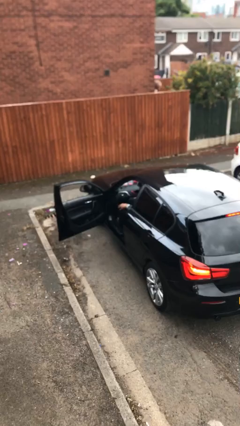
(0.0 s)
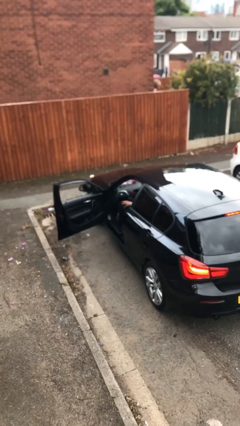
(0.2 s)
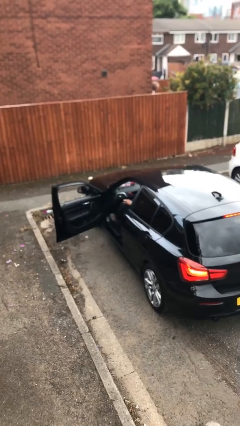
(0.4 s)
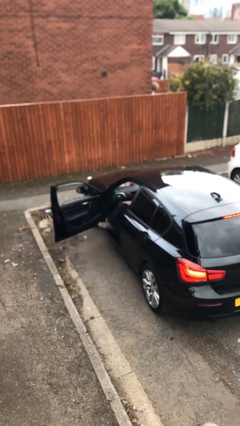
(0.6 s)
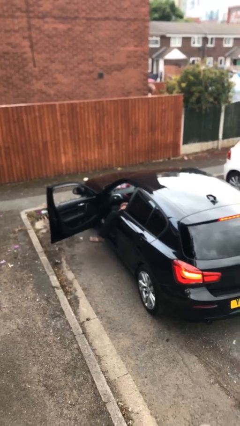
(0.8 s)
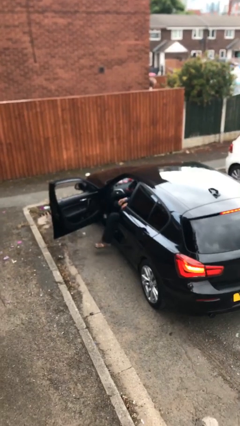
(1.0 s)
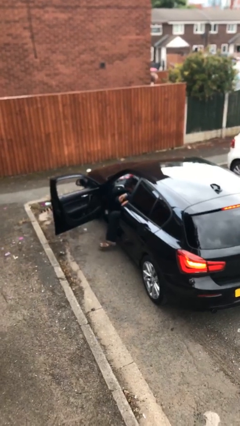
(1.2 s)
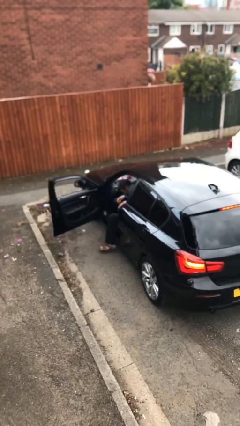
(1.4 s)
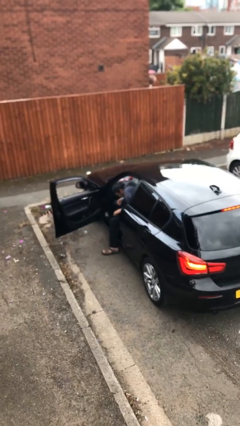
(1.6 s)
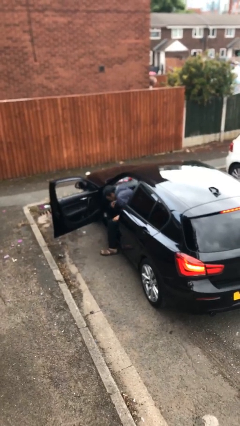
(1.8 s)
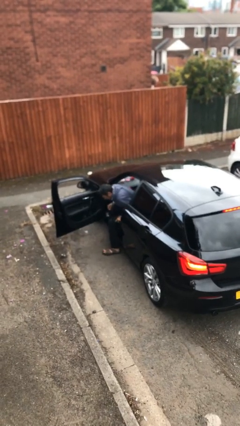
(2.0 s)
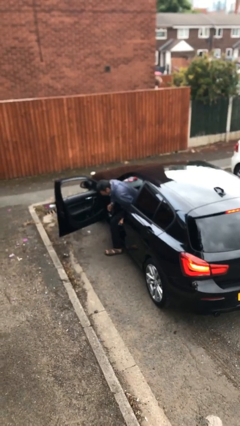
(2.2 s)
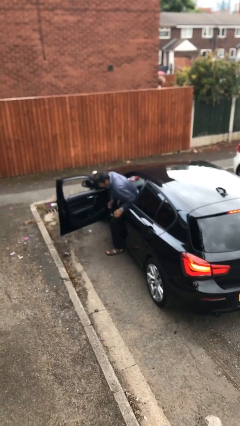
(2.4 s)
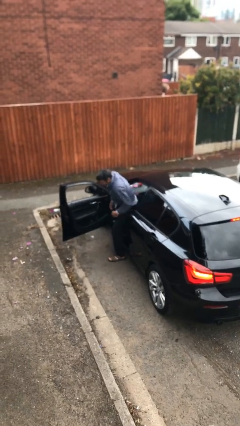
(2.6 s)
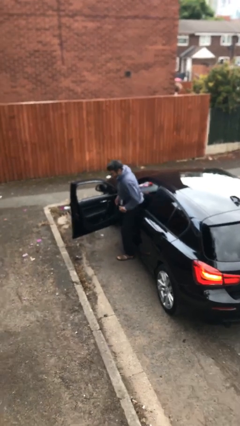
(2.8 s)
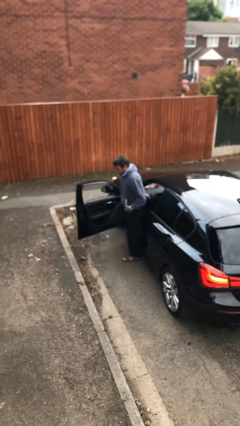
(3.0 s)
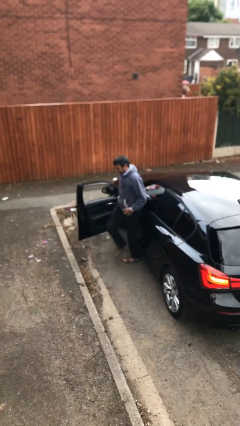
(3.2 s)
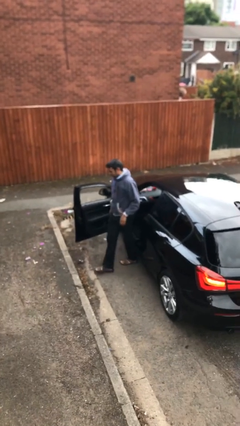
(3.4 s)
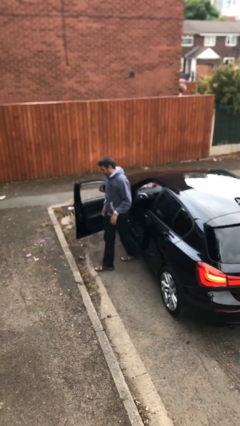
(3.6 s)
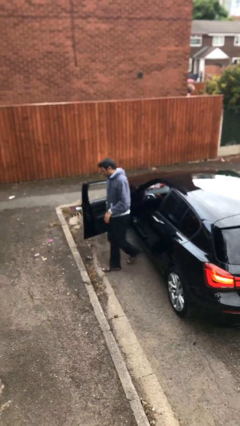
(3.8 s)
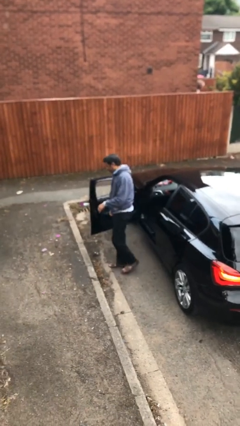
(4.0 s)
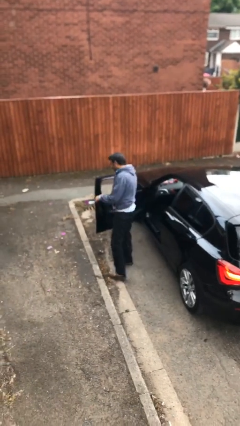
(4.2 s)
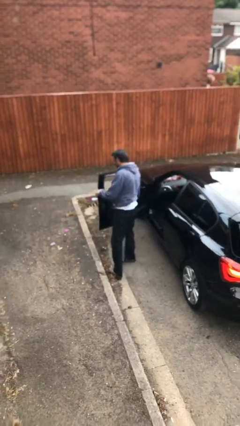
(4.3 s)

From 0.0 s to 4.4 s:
person exits car

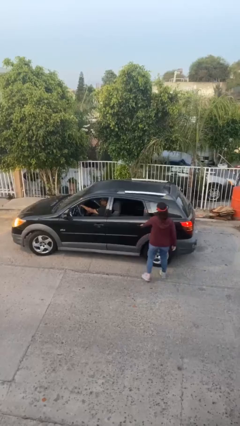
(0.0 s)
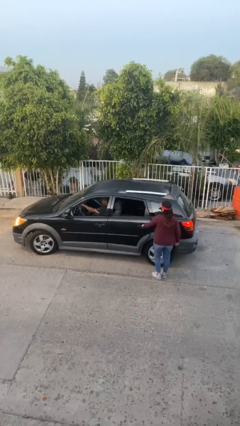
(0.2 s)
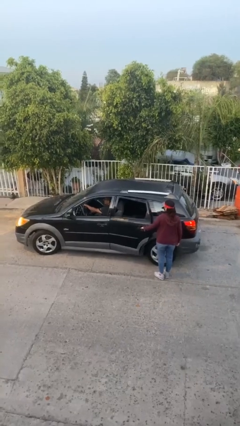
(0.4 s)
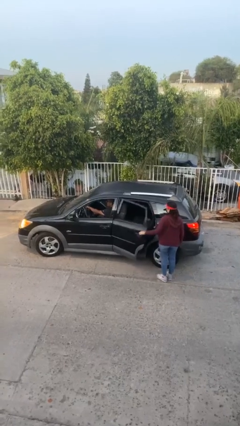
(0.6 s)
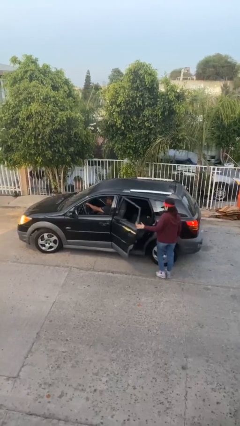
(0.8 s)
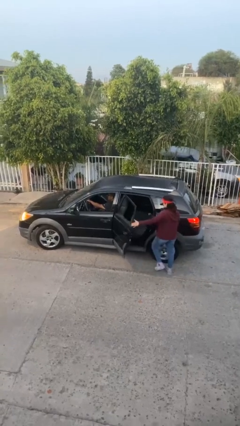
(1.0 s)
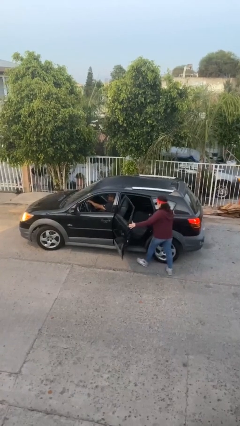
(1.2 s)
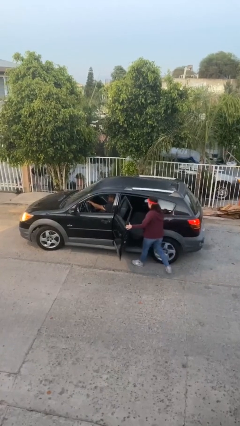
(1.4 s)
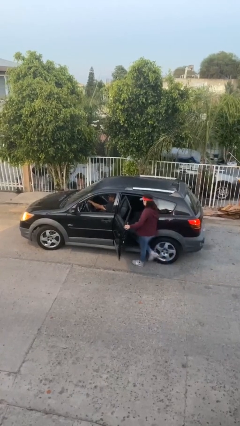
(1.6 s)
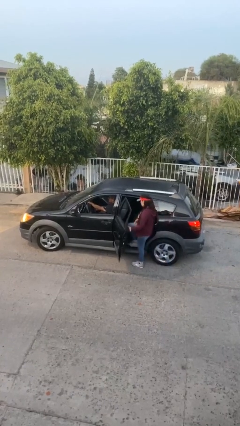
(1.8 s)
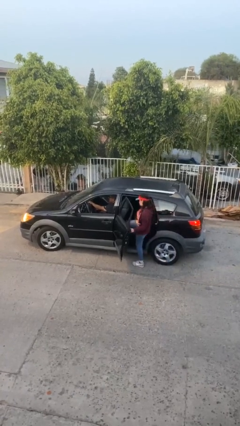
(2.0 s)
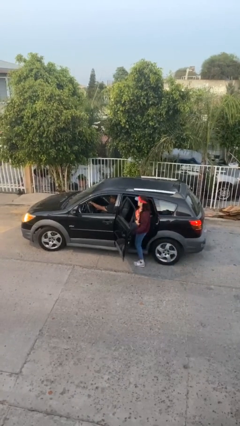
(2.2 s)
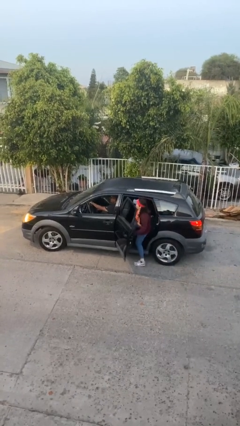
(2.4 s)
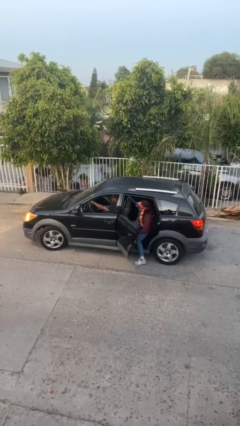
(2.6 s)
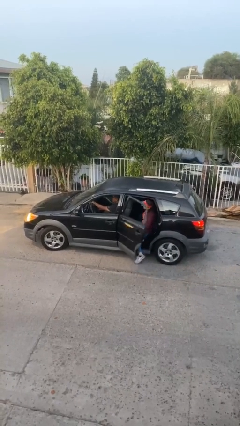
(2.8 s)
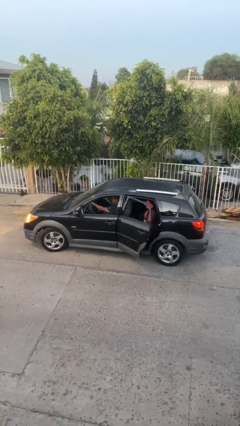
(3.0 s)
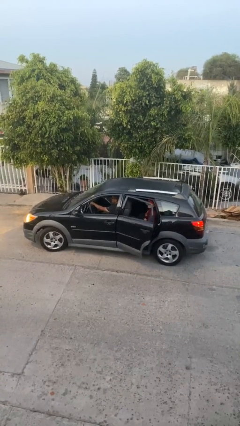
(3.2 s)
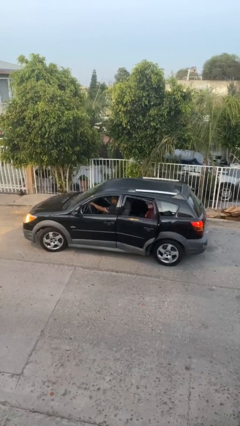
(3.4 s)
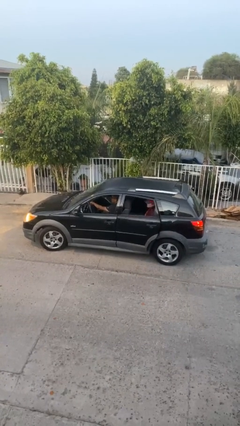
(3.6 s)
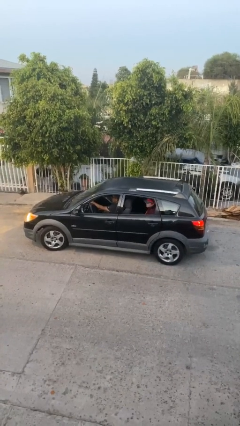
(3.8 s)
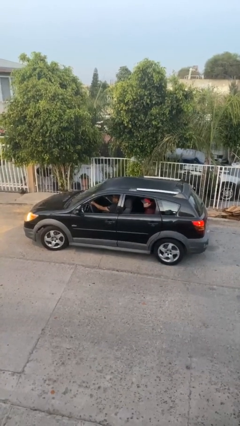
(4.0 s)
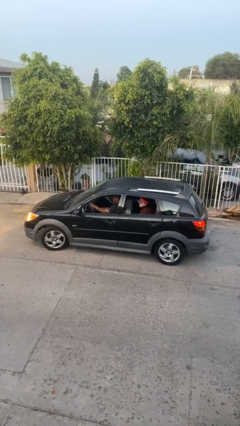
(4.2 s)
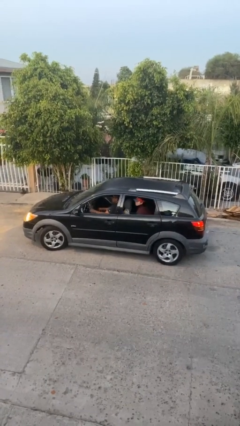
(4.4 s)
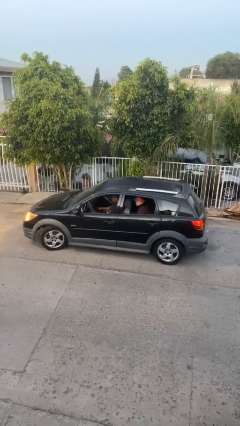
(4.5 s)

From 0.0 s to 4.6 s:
car picks up person

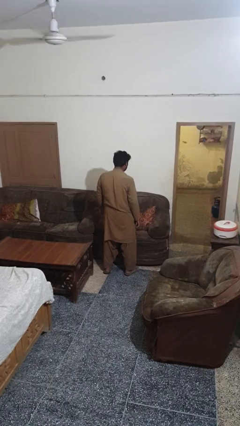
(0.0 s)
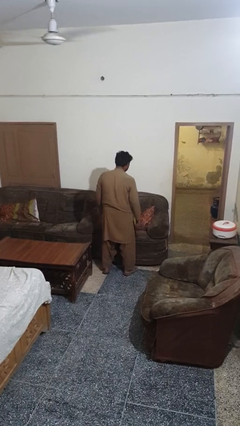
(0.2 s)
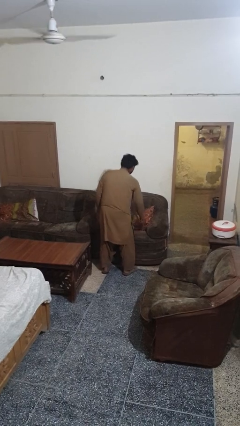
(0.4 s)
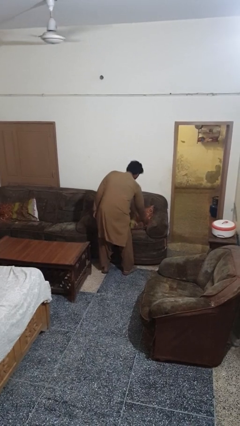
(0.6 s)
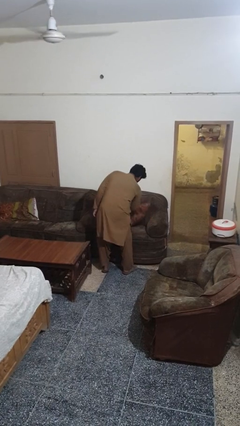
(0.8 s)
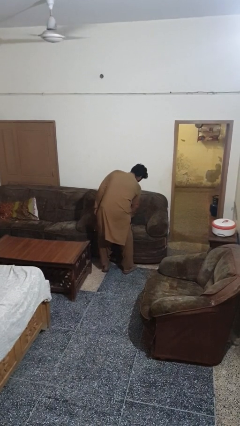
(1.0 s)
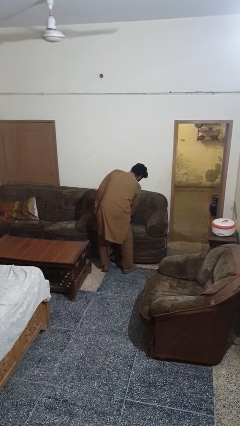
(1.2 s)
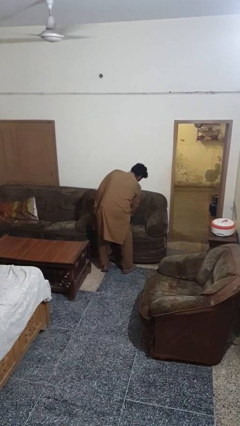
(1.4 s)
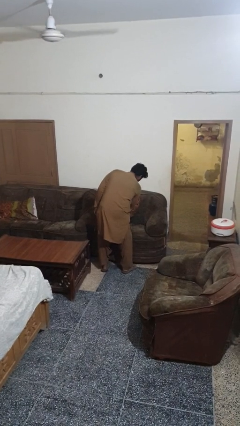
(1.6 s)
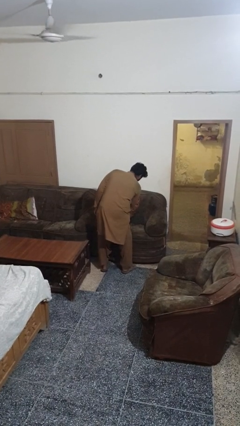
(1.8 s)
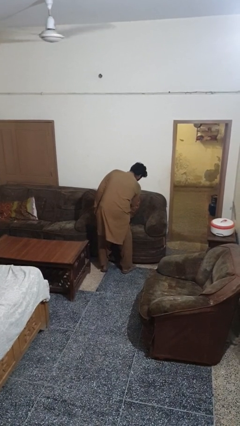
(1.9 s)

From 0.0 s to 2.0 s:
person searches in couch

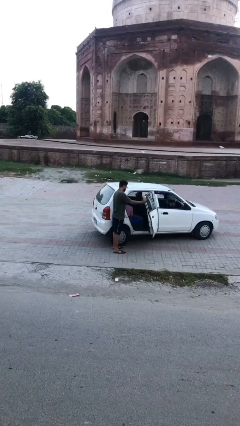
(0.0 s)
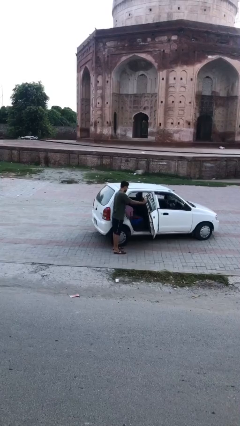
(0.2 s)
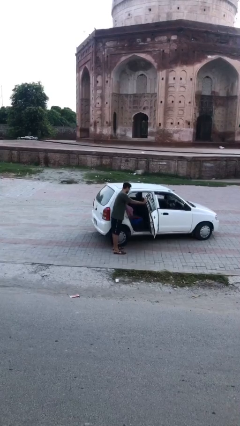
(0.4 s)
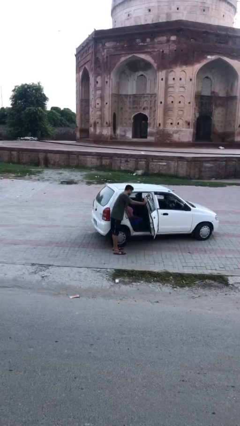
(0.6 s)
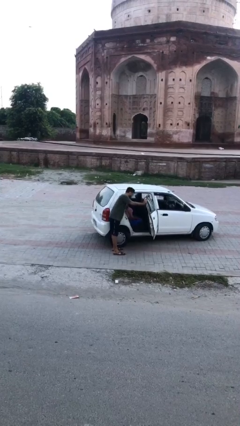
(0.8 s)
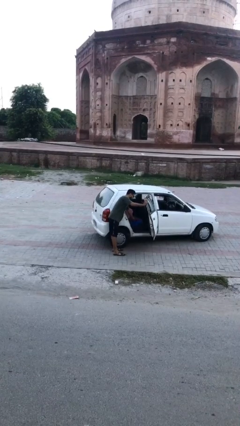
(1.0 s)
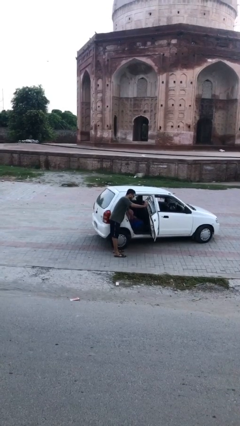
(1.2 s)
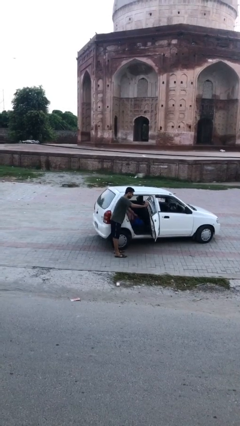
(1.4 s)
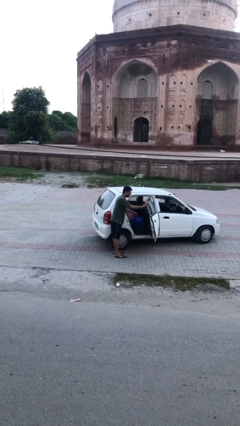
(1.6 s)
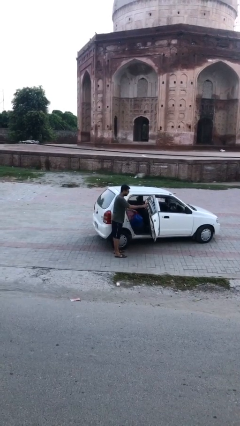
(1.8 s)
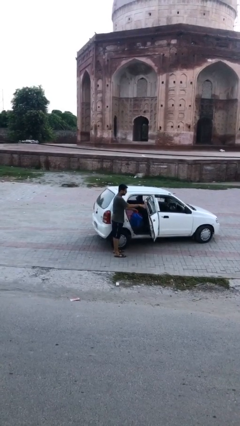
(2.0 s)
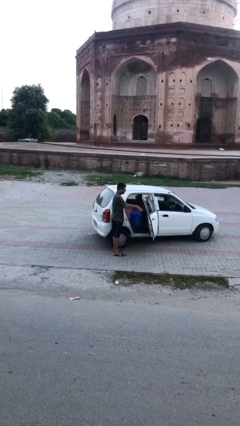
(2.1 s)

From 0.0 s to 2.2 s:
person unloads car
